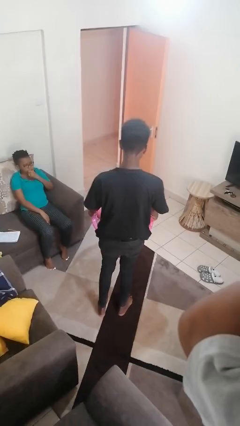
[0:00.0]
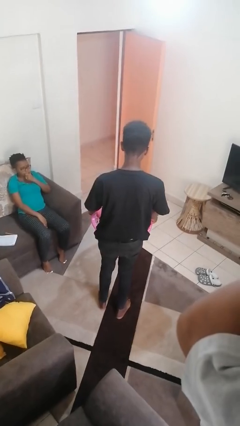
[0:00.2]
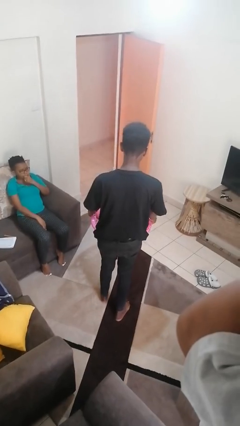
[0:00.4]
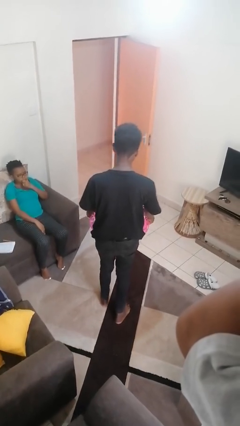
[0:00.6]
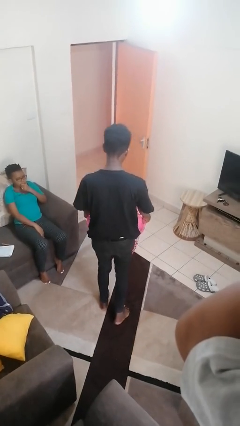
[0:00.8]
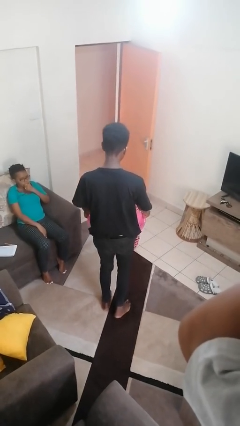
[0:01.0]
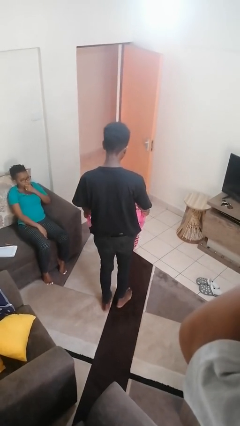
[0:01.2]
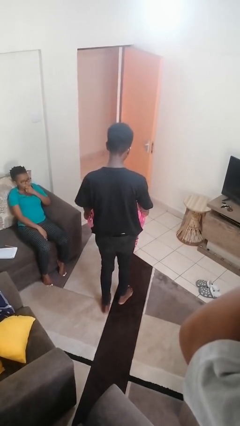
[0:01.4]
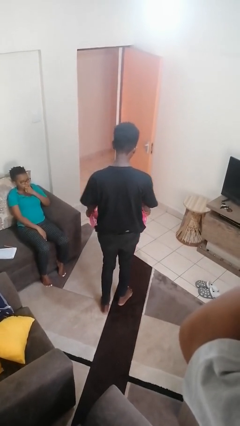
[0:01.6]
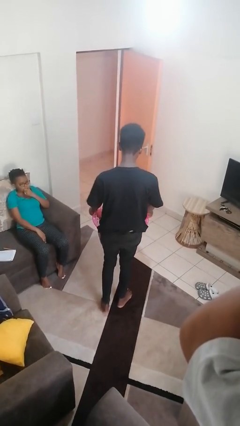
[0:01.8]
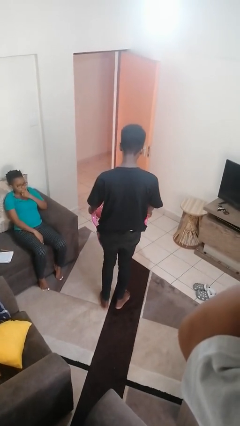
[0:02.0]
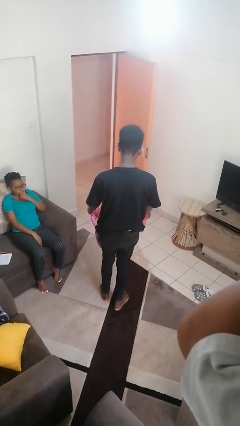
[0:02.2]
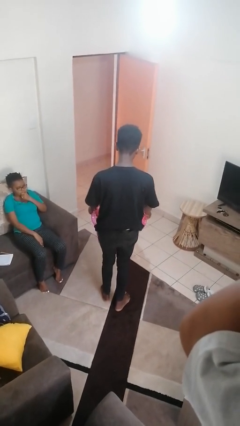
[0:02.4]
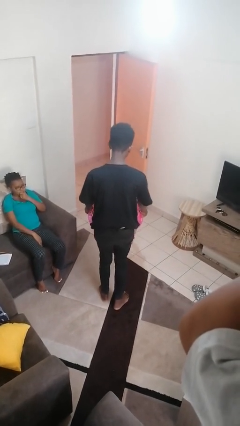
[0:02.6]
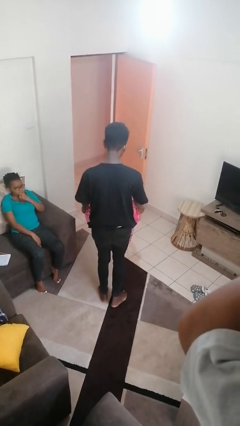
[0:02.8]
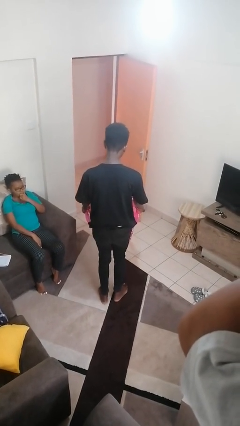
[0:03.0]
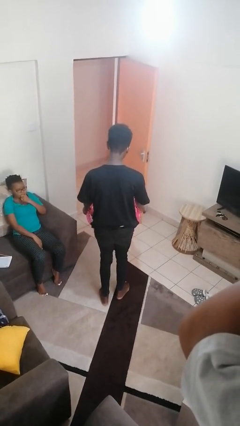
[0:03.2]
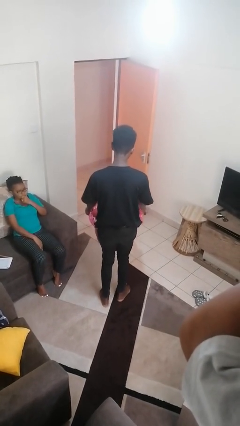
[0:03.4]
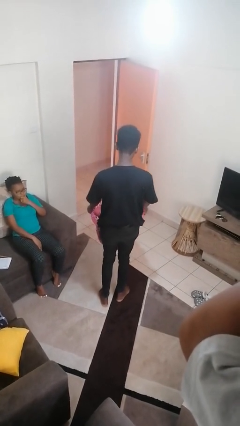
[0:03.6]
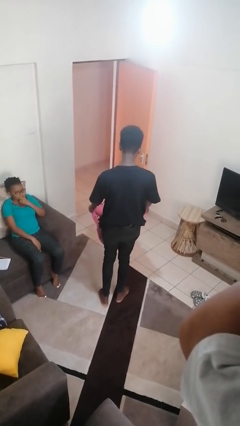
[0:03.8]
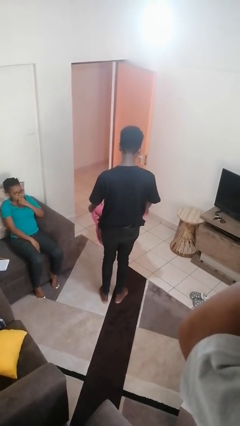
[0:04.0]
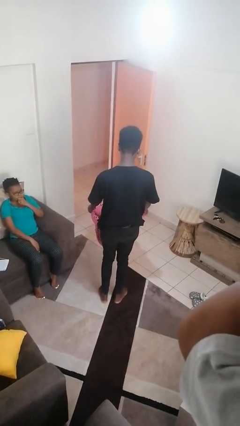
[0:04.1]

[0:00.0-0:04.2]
person carries laundry basket

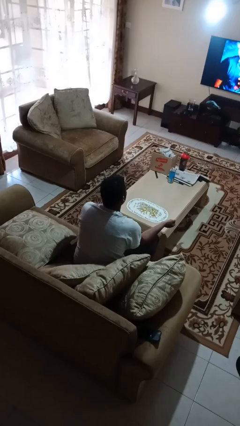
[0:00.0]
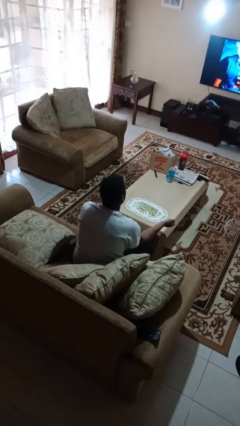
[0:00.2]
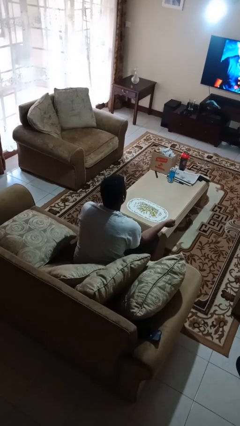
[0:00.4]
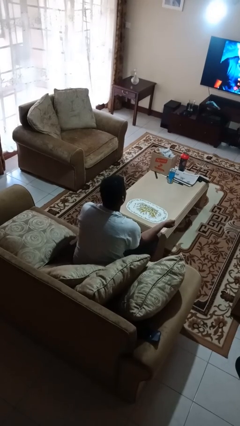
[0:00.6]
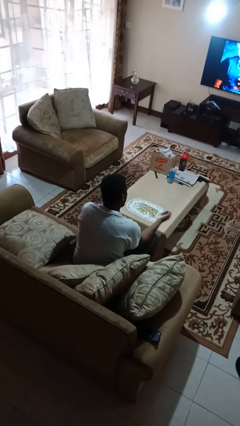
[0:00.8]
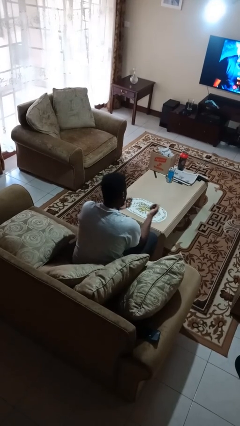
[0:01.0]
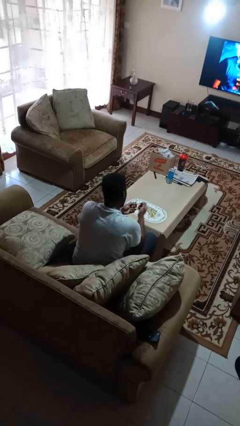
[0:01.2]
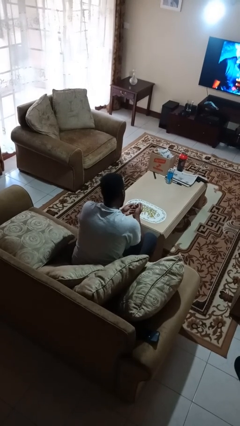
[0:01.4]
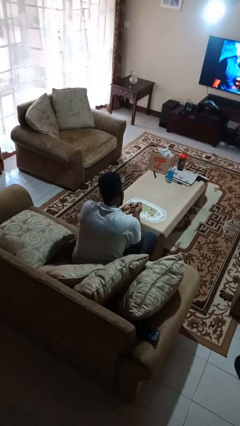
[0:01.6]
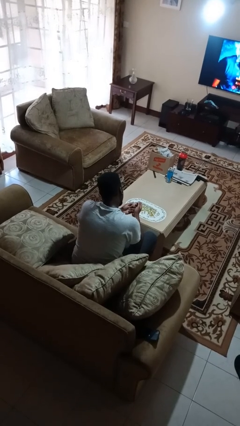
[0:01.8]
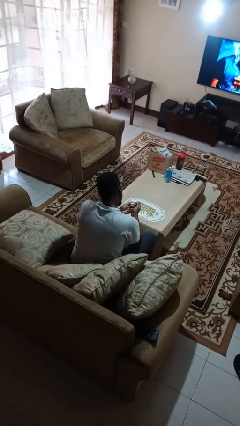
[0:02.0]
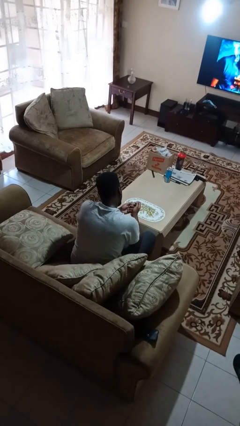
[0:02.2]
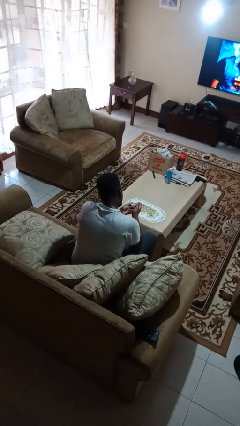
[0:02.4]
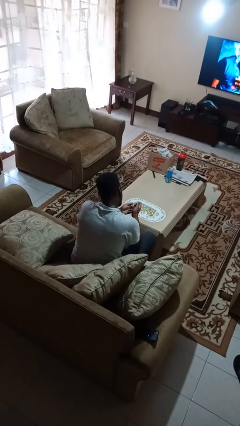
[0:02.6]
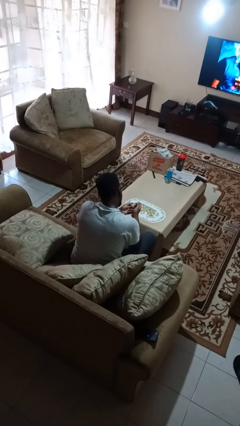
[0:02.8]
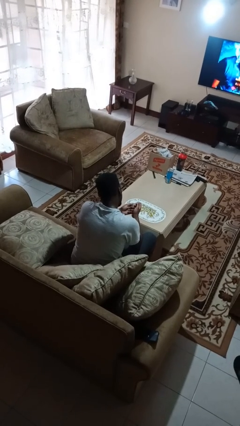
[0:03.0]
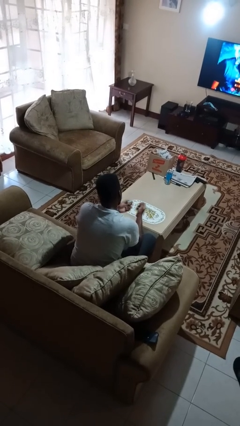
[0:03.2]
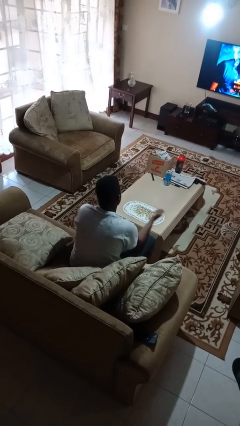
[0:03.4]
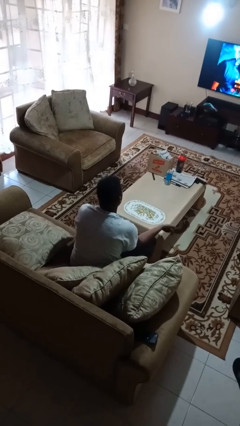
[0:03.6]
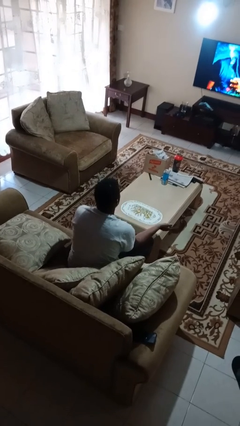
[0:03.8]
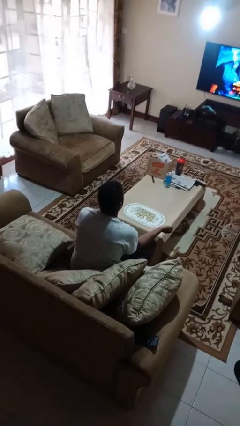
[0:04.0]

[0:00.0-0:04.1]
person clips fingernails

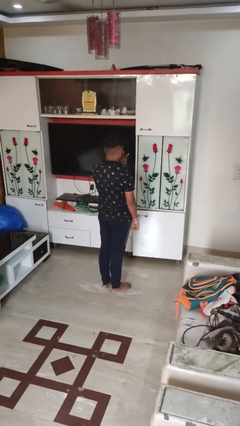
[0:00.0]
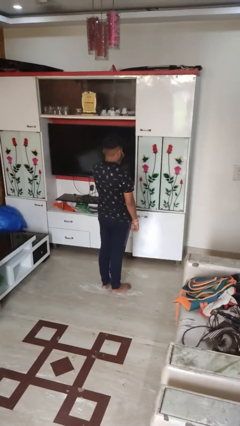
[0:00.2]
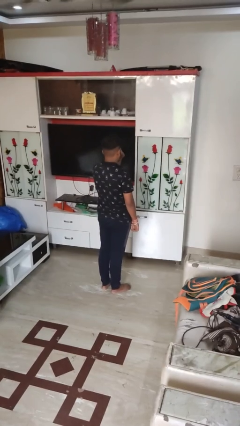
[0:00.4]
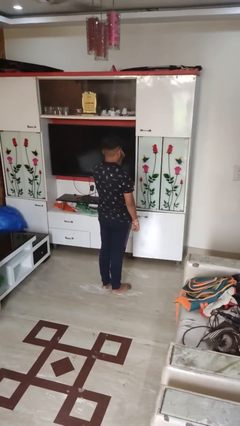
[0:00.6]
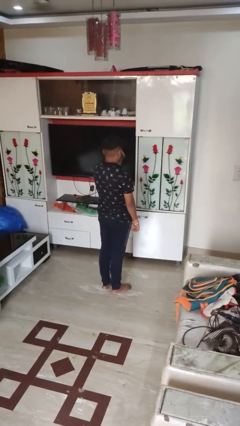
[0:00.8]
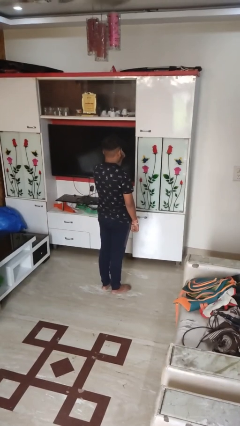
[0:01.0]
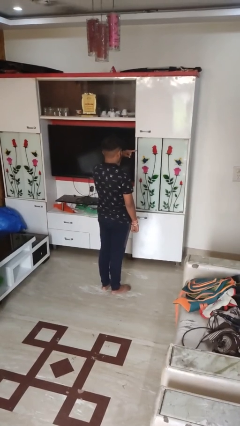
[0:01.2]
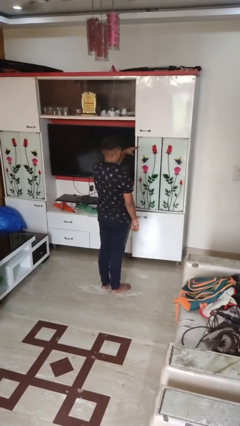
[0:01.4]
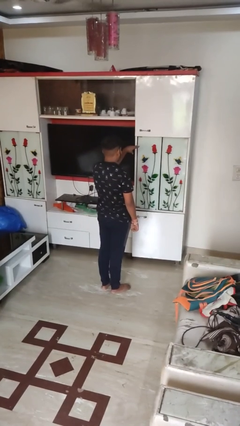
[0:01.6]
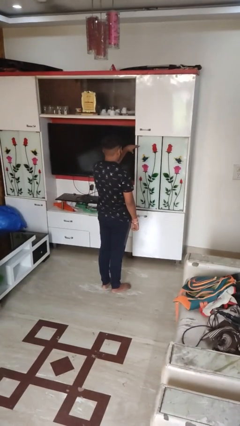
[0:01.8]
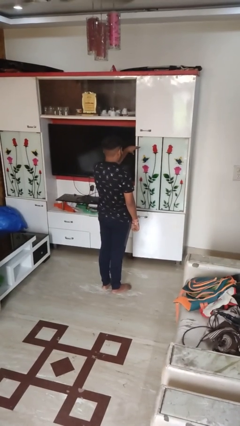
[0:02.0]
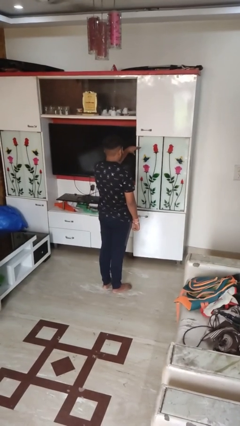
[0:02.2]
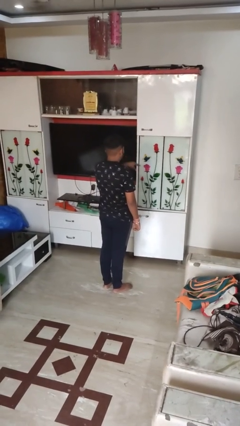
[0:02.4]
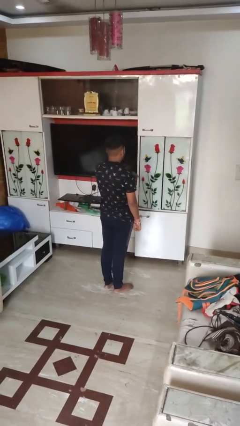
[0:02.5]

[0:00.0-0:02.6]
person gestures watch closely

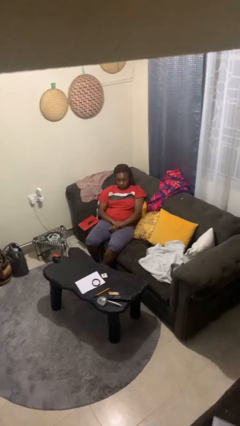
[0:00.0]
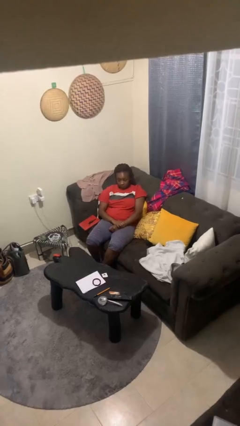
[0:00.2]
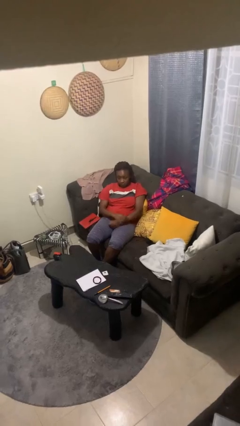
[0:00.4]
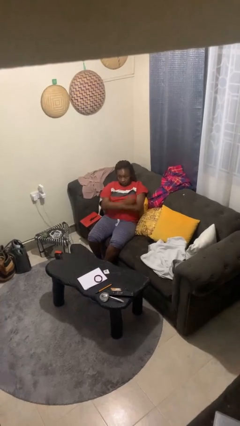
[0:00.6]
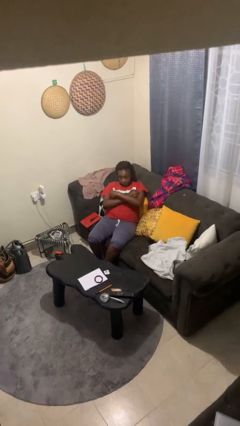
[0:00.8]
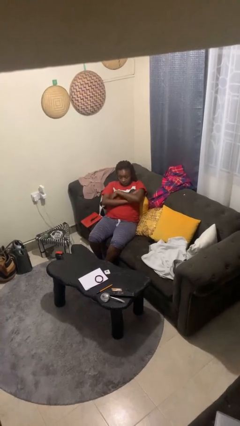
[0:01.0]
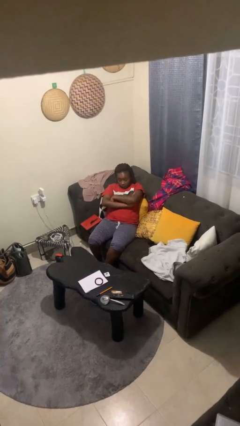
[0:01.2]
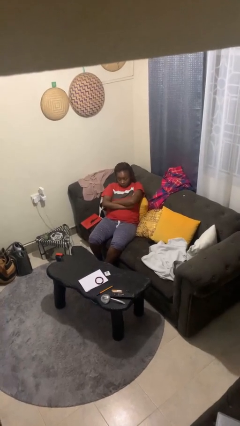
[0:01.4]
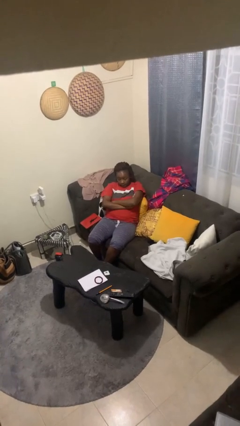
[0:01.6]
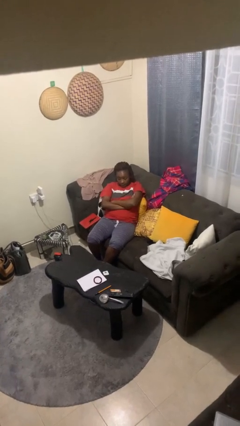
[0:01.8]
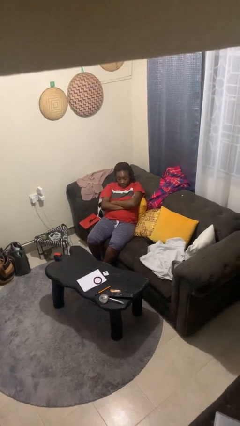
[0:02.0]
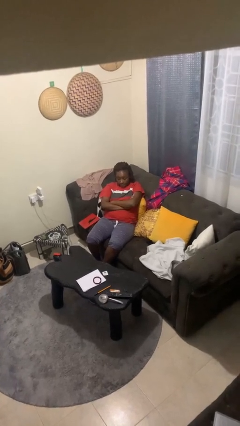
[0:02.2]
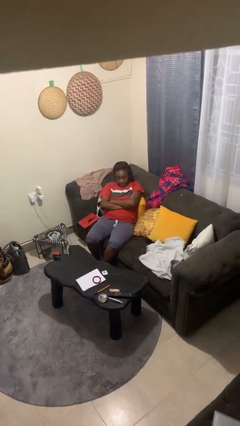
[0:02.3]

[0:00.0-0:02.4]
person crosses arms

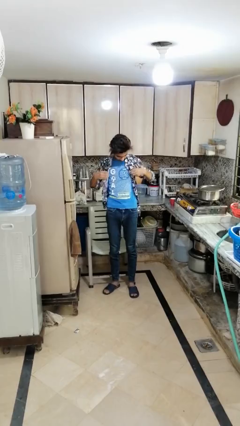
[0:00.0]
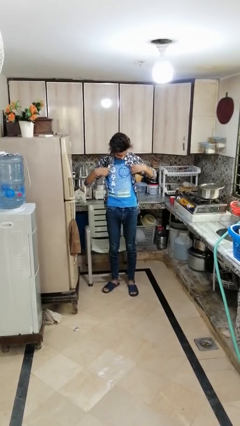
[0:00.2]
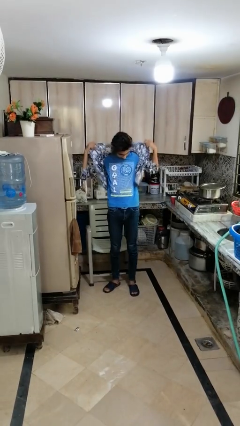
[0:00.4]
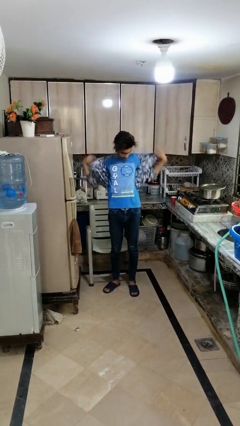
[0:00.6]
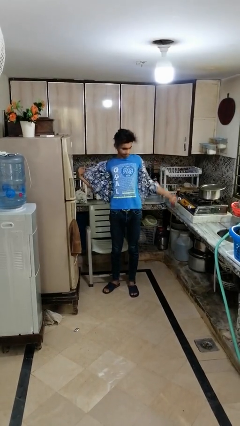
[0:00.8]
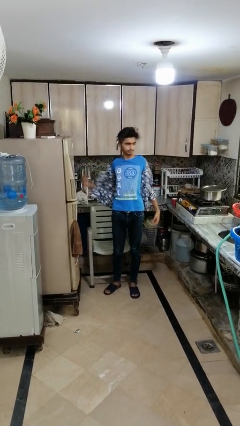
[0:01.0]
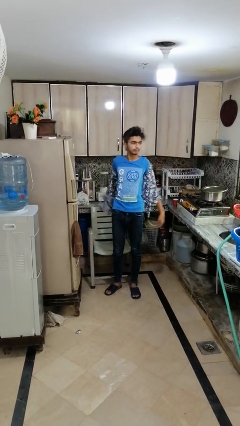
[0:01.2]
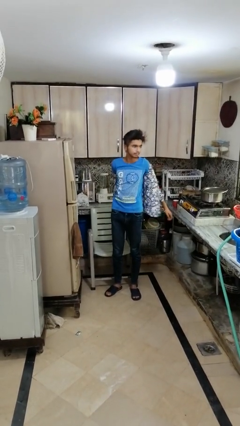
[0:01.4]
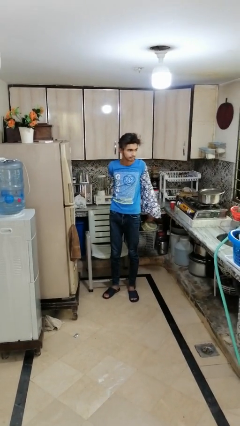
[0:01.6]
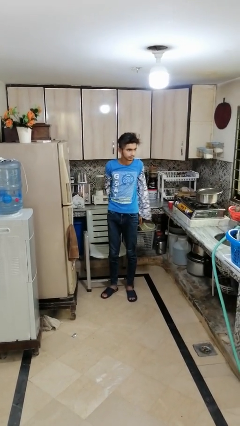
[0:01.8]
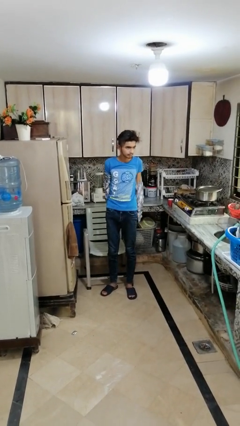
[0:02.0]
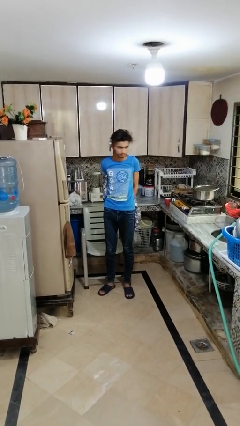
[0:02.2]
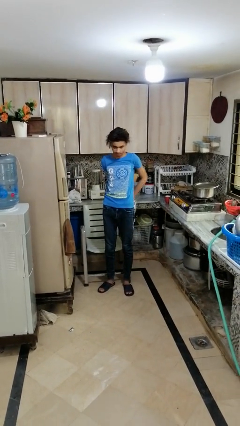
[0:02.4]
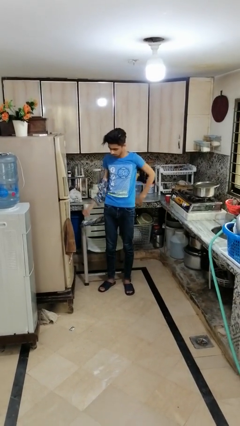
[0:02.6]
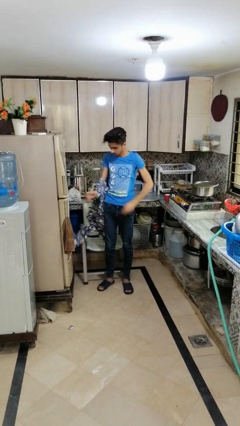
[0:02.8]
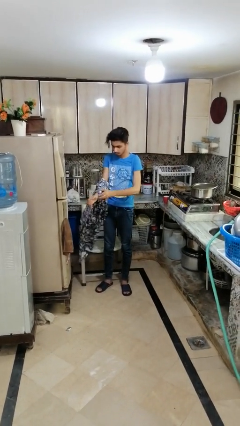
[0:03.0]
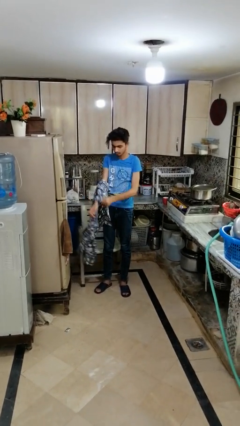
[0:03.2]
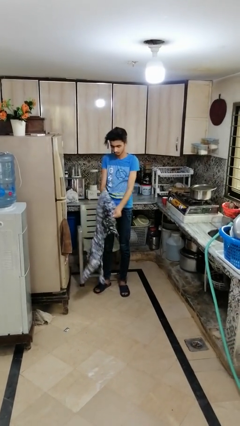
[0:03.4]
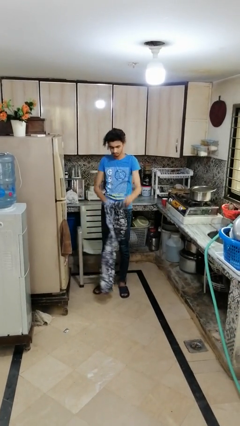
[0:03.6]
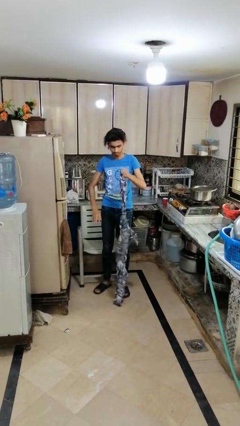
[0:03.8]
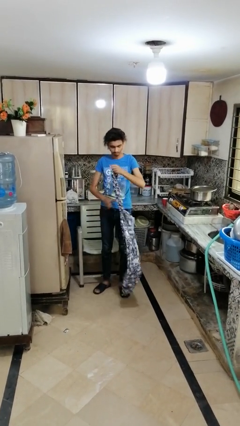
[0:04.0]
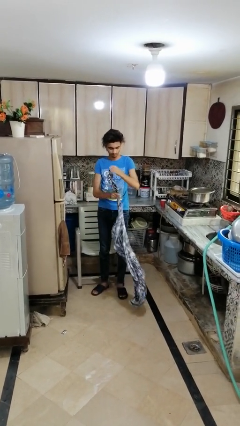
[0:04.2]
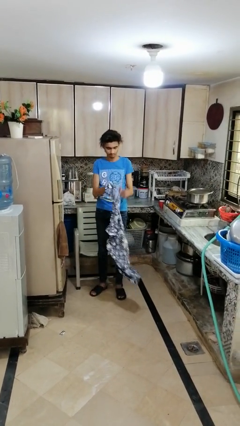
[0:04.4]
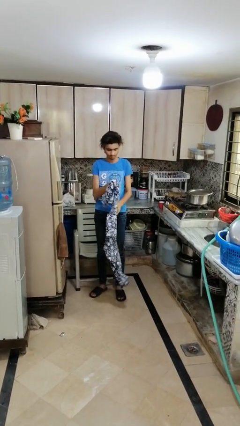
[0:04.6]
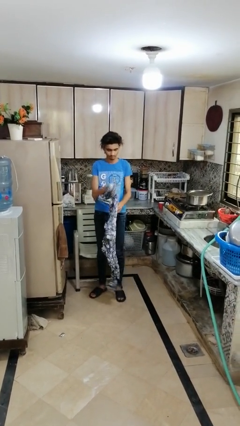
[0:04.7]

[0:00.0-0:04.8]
person takes off shirt
